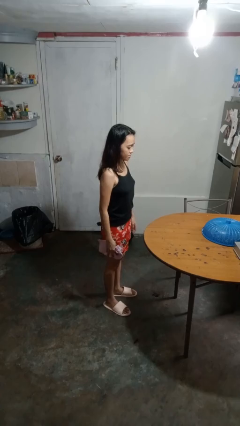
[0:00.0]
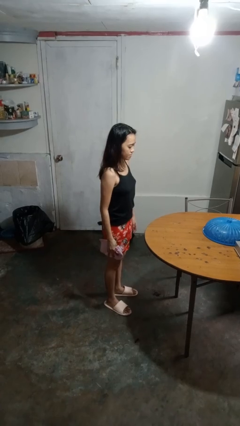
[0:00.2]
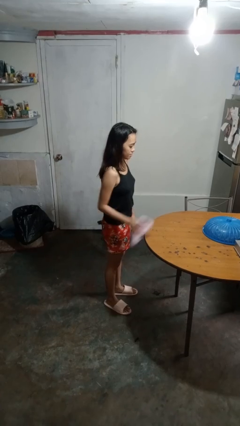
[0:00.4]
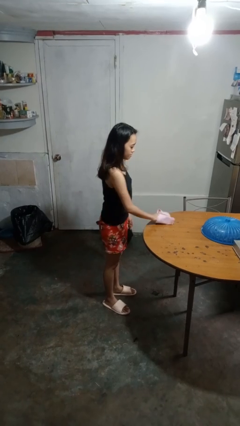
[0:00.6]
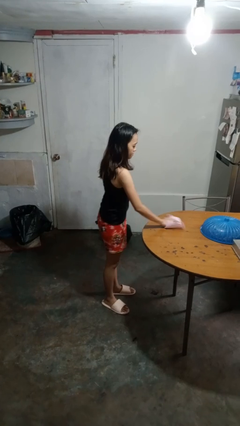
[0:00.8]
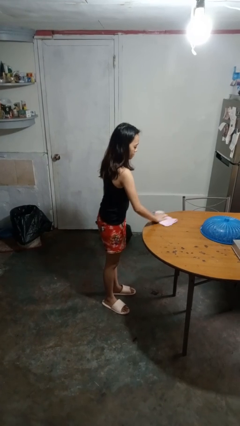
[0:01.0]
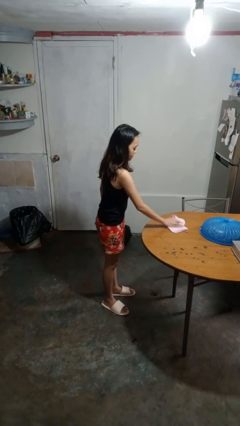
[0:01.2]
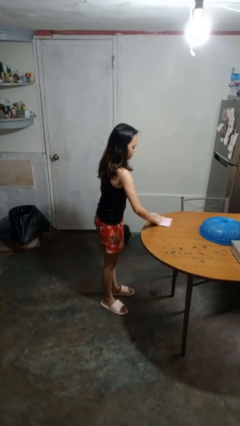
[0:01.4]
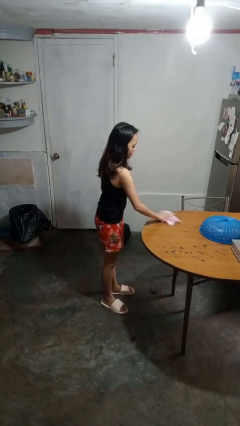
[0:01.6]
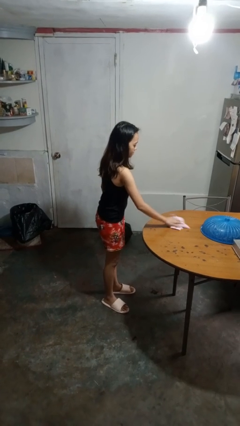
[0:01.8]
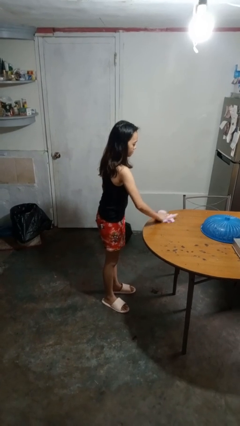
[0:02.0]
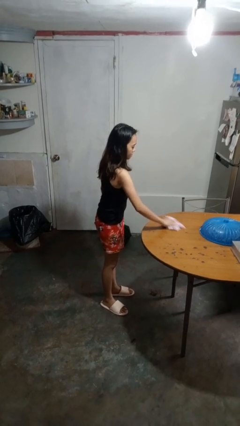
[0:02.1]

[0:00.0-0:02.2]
person cleans table with rag

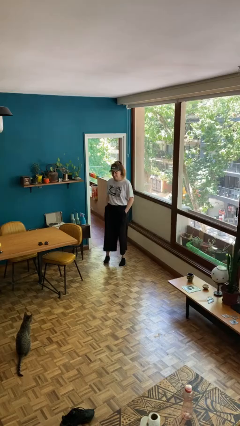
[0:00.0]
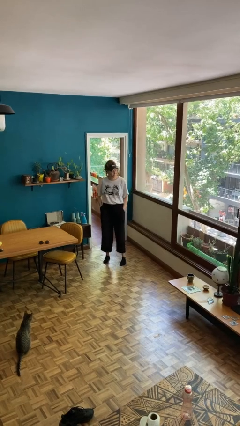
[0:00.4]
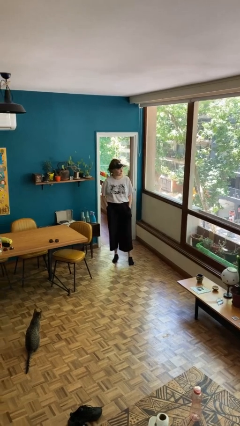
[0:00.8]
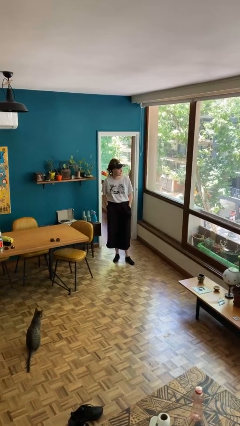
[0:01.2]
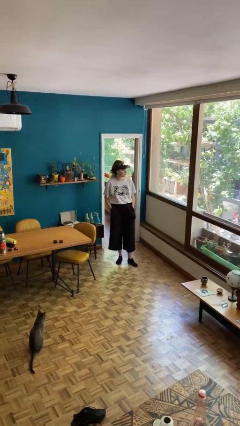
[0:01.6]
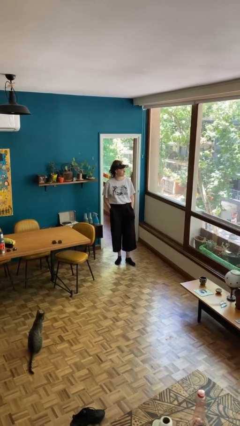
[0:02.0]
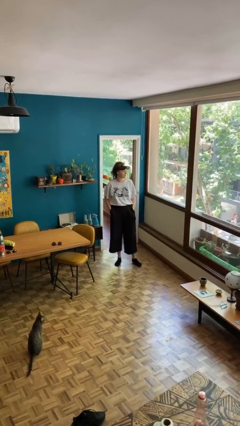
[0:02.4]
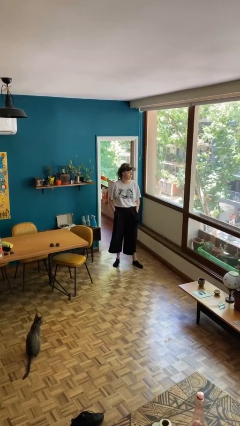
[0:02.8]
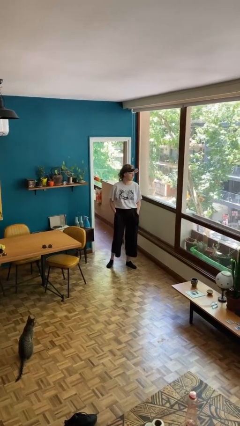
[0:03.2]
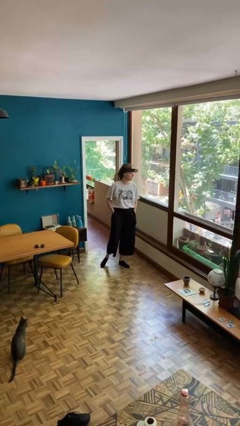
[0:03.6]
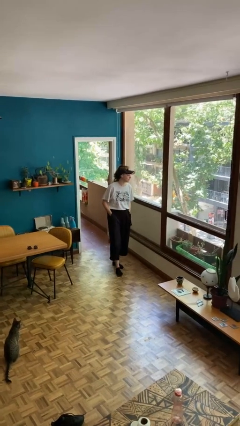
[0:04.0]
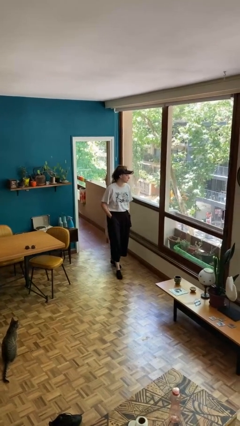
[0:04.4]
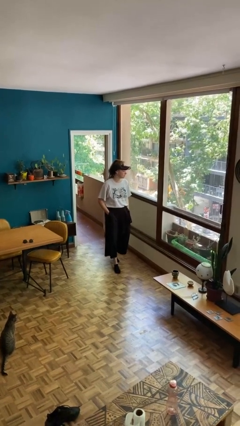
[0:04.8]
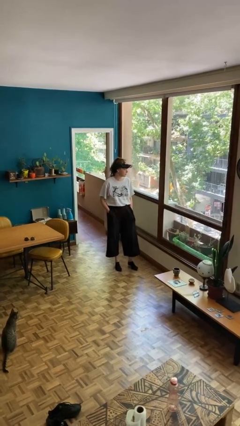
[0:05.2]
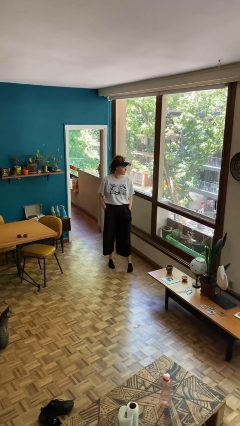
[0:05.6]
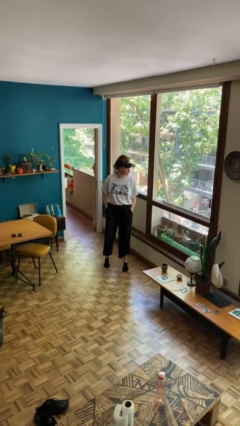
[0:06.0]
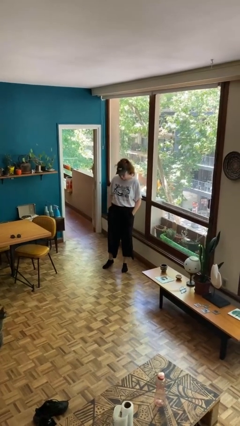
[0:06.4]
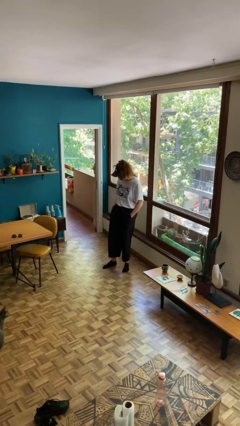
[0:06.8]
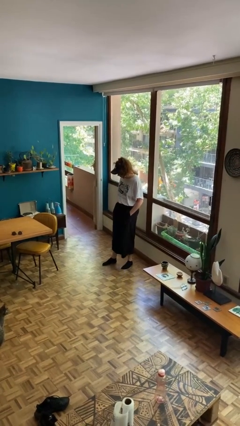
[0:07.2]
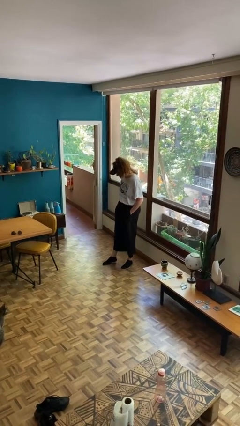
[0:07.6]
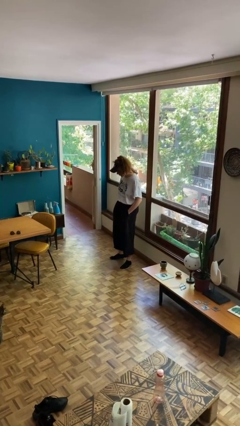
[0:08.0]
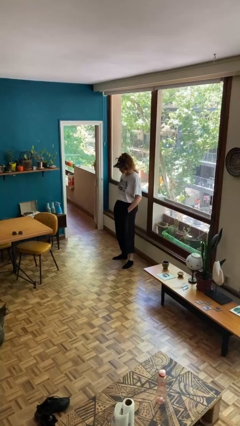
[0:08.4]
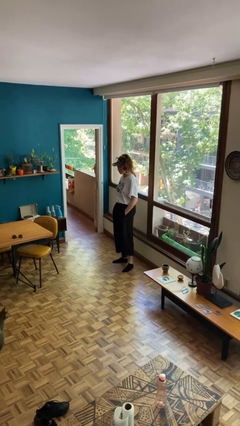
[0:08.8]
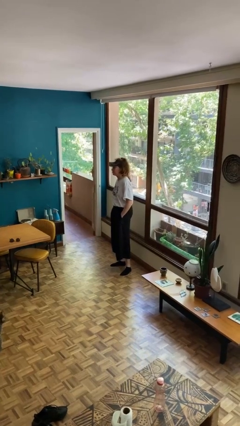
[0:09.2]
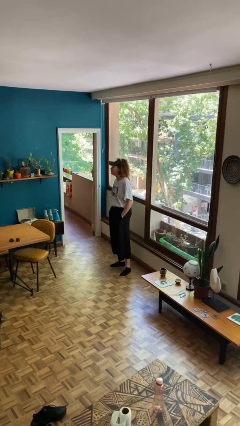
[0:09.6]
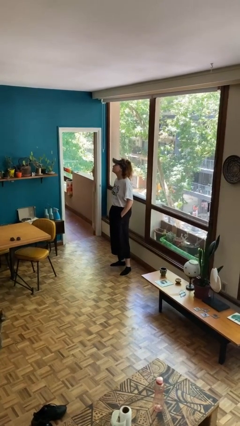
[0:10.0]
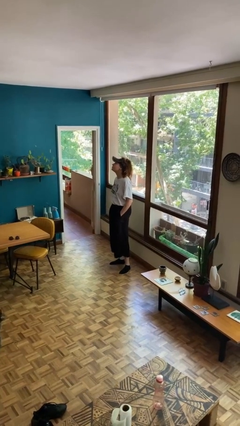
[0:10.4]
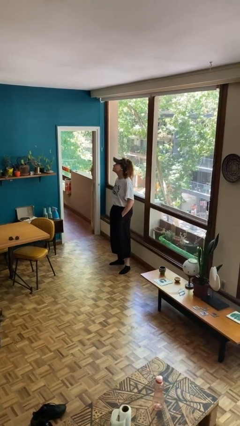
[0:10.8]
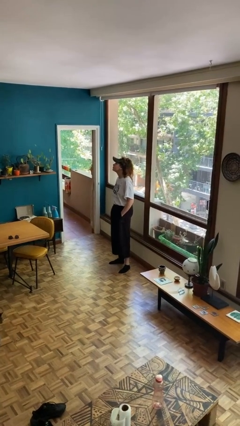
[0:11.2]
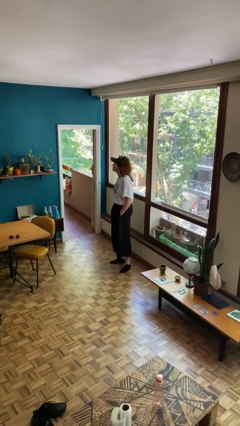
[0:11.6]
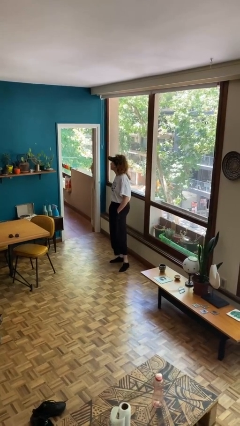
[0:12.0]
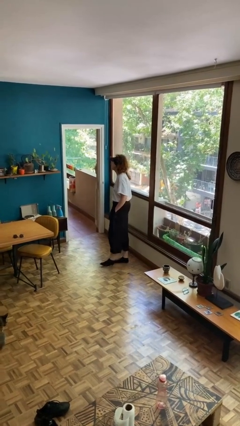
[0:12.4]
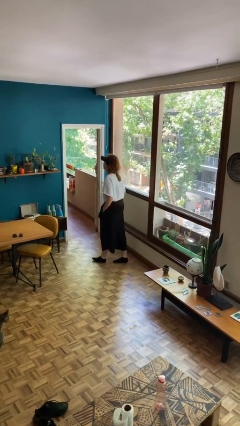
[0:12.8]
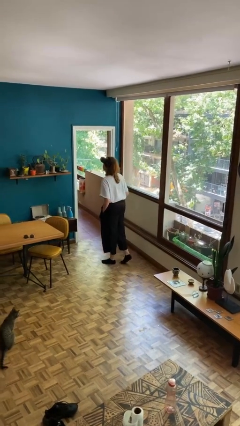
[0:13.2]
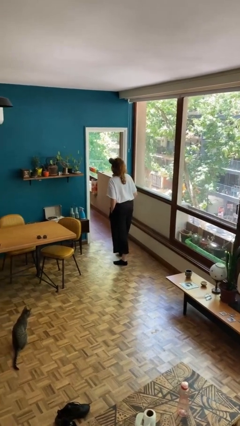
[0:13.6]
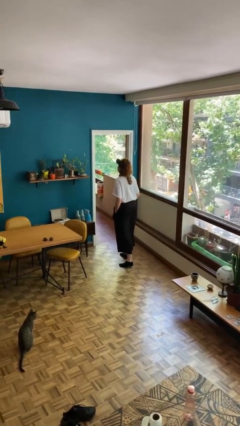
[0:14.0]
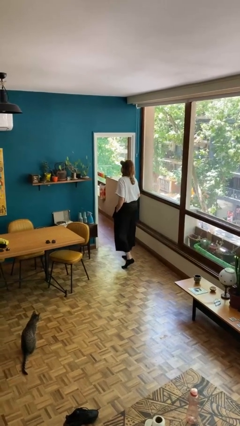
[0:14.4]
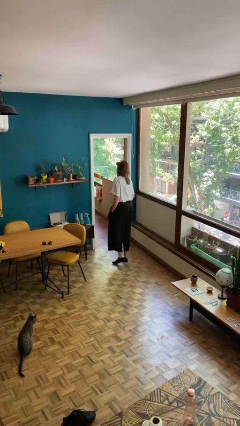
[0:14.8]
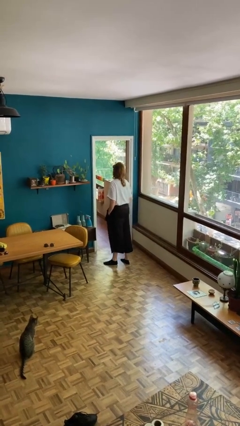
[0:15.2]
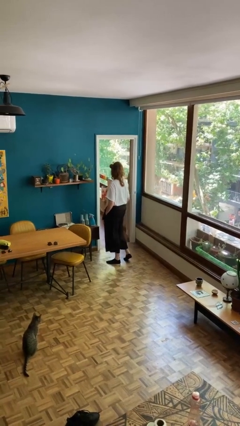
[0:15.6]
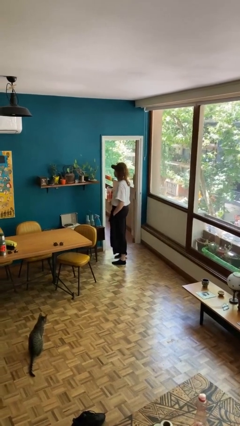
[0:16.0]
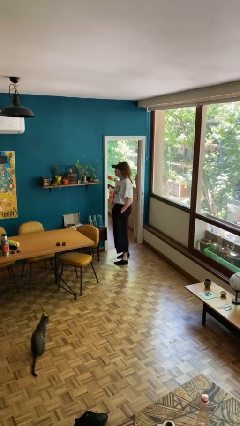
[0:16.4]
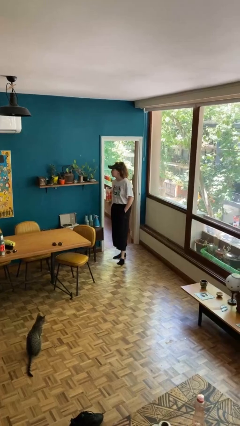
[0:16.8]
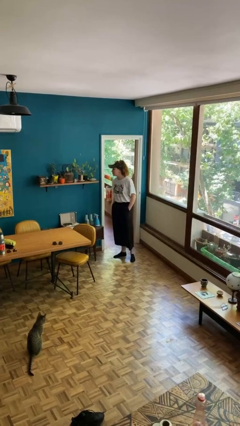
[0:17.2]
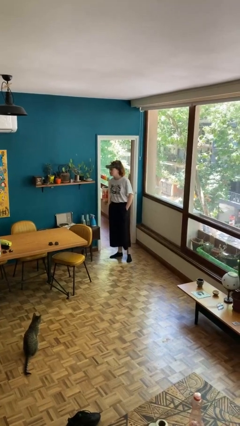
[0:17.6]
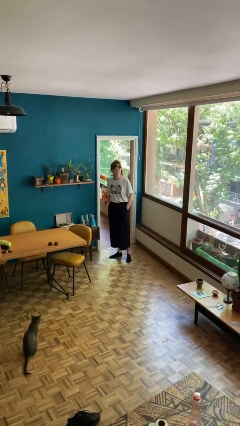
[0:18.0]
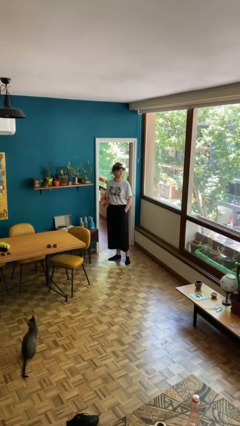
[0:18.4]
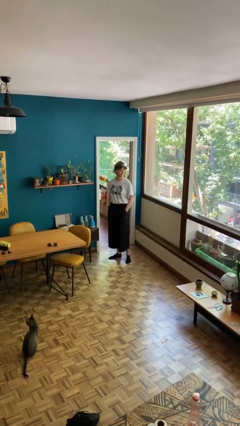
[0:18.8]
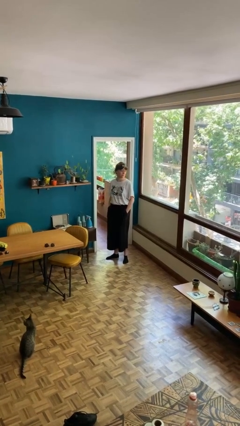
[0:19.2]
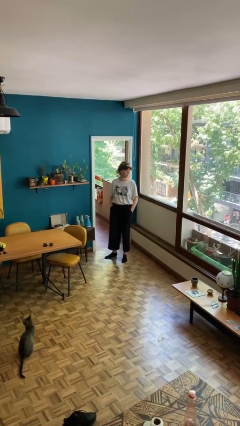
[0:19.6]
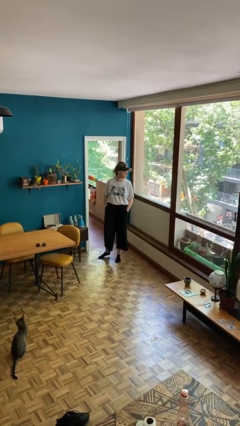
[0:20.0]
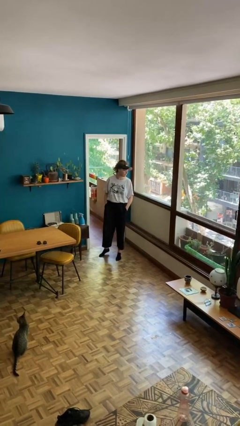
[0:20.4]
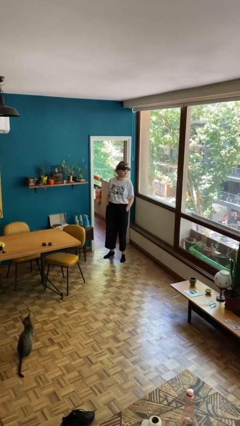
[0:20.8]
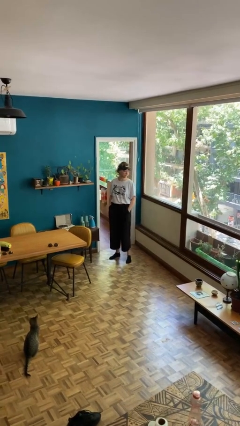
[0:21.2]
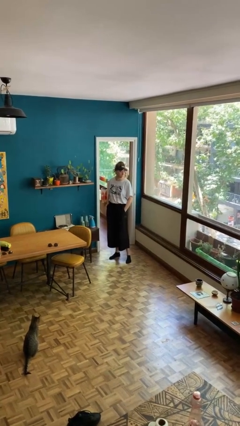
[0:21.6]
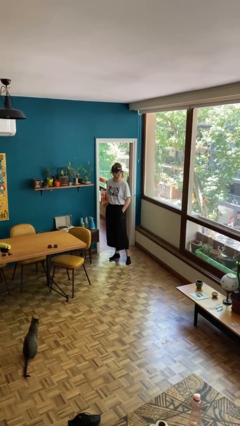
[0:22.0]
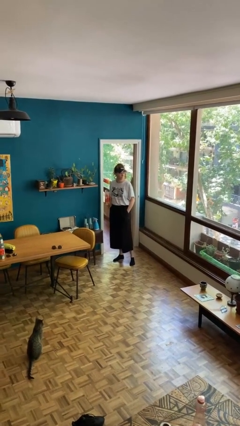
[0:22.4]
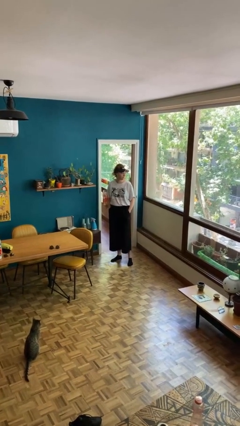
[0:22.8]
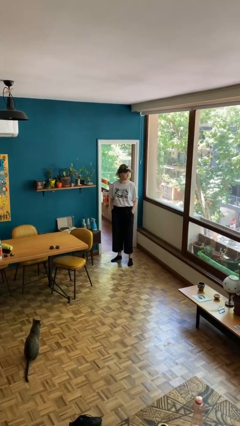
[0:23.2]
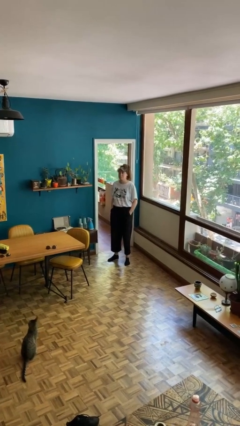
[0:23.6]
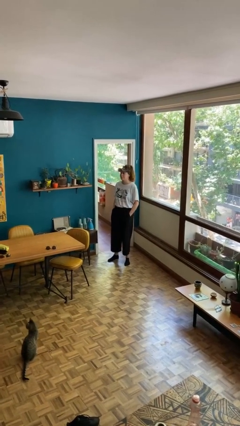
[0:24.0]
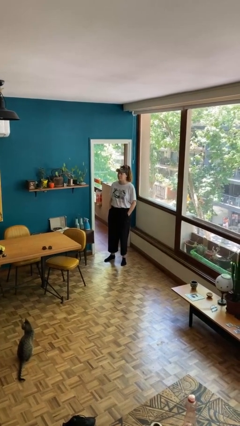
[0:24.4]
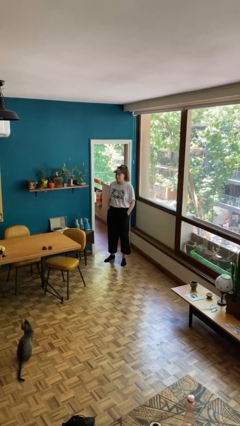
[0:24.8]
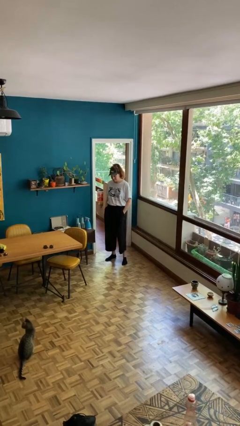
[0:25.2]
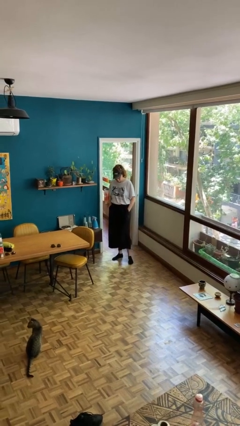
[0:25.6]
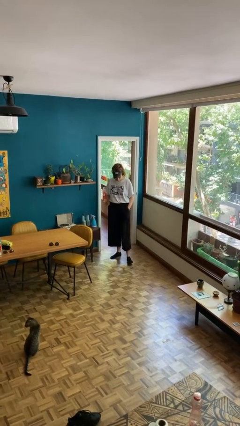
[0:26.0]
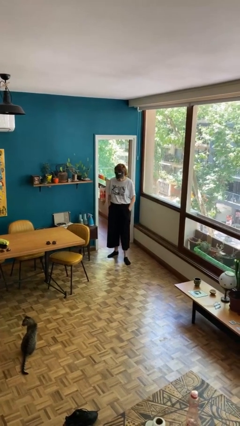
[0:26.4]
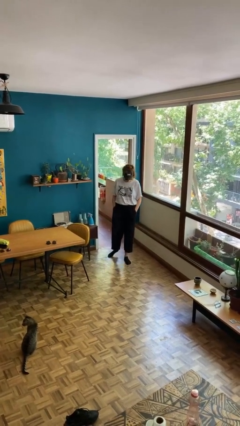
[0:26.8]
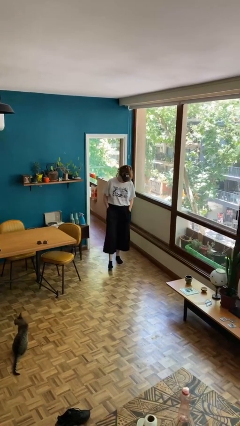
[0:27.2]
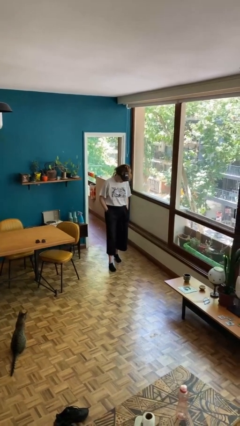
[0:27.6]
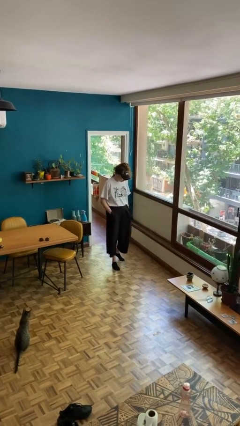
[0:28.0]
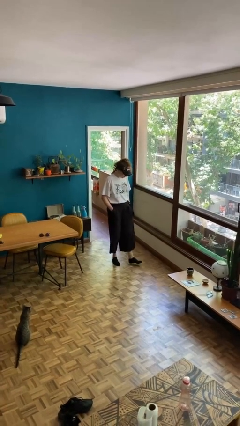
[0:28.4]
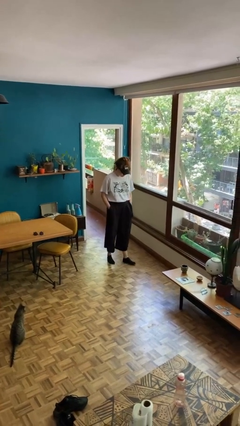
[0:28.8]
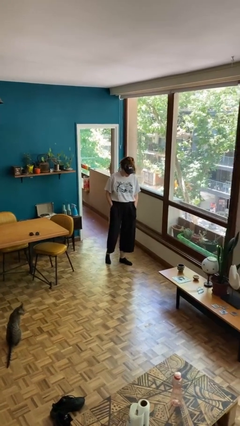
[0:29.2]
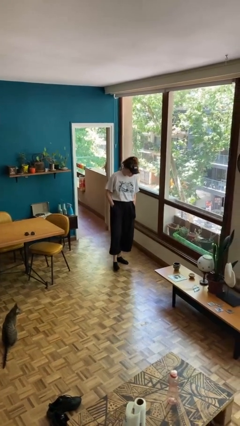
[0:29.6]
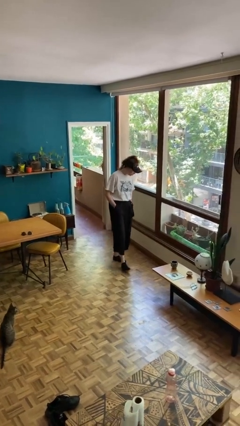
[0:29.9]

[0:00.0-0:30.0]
person walks

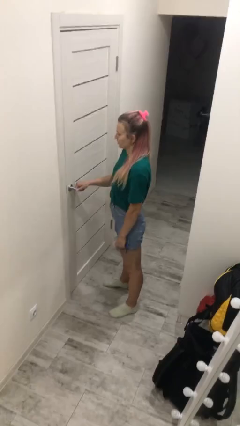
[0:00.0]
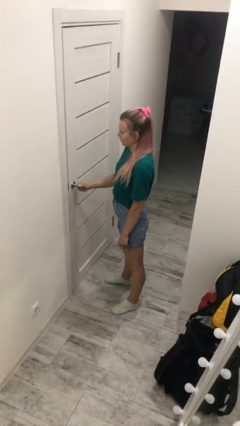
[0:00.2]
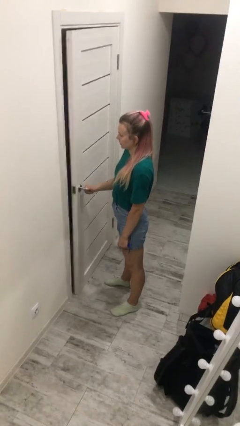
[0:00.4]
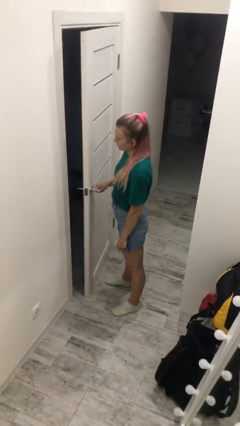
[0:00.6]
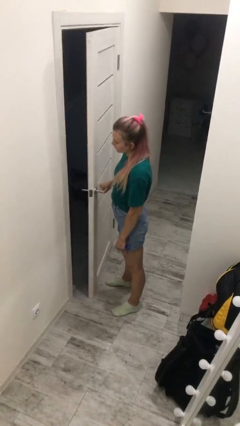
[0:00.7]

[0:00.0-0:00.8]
person opens facility door
